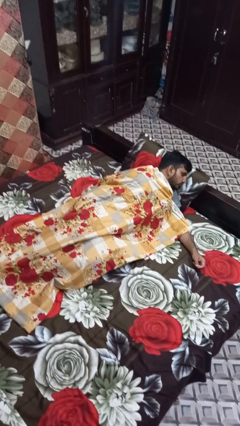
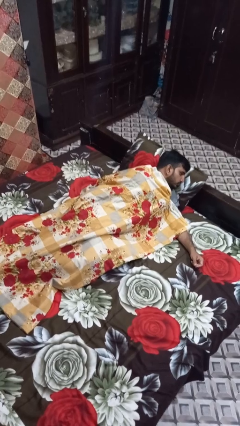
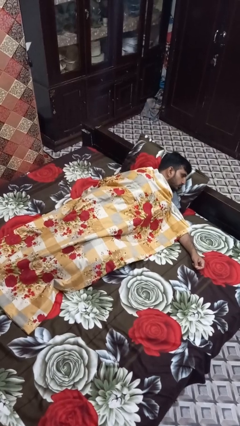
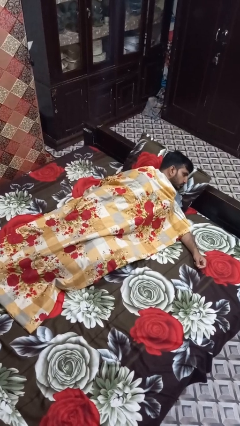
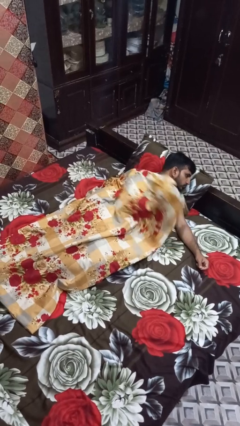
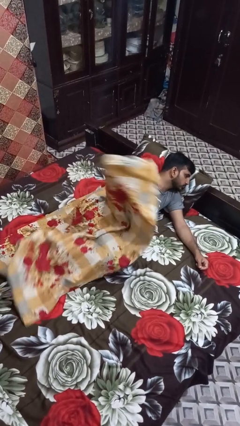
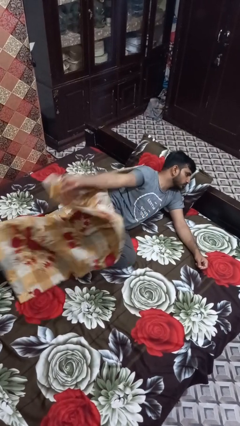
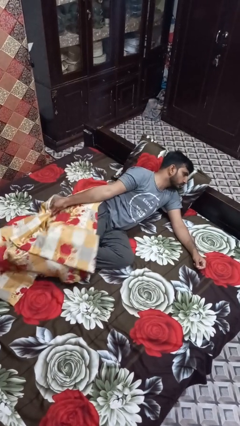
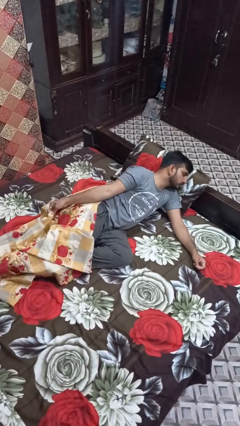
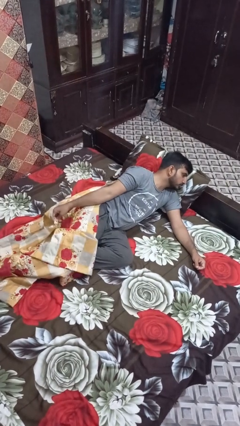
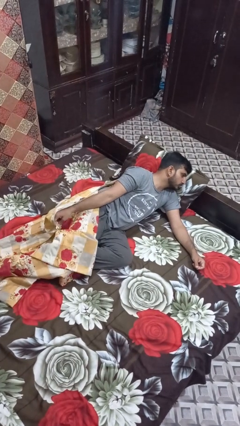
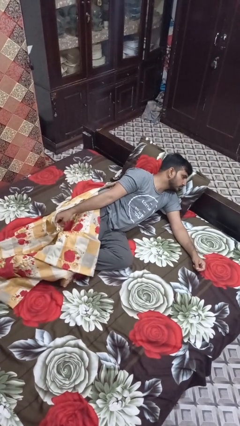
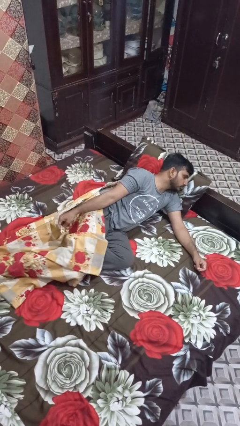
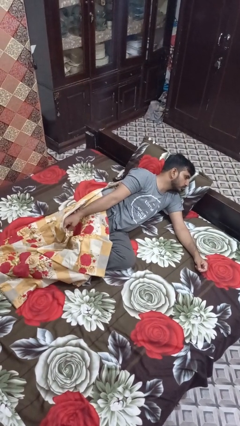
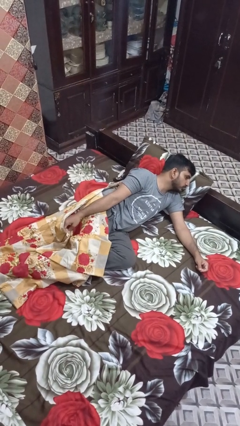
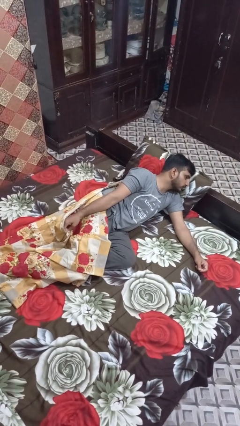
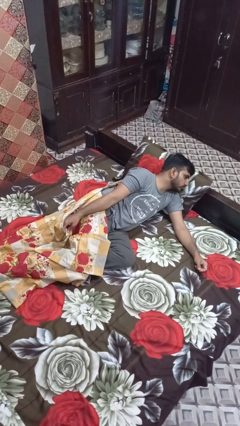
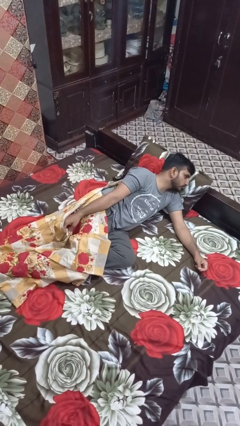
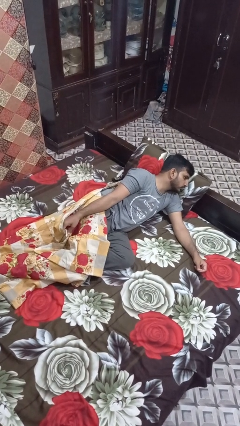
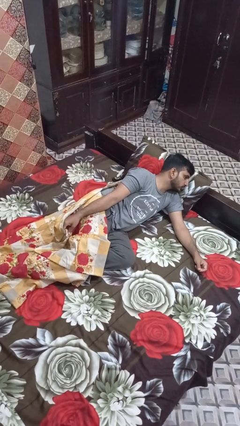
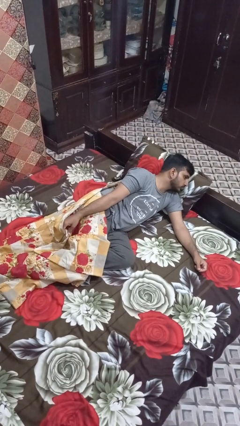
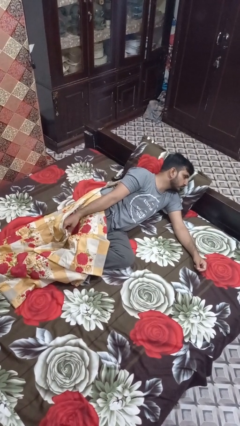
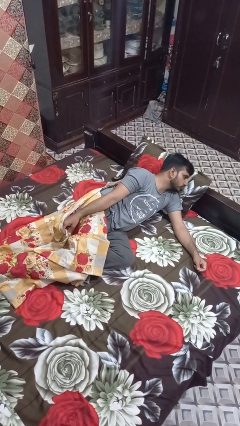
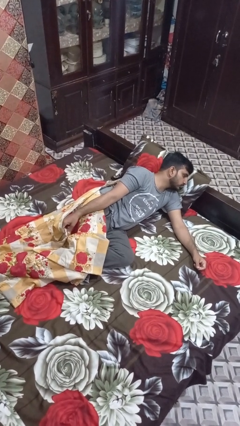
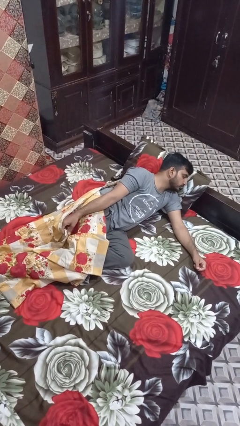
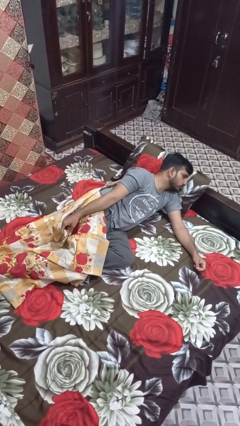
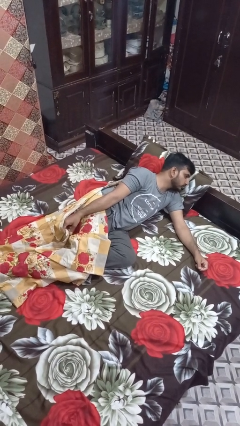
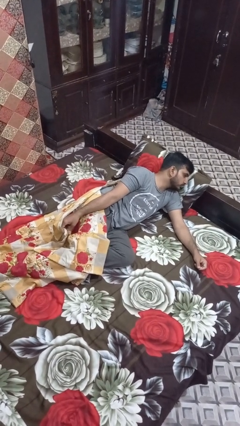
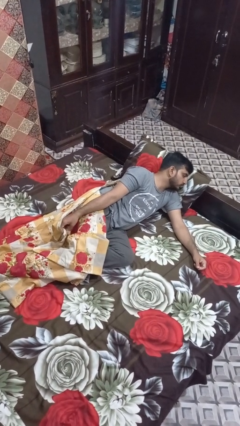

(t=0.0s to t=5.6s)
person uncovers with bedsheets

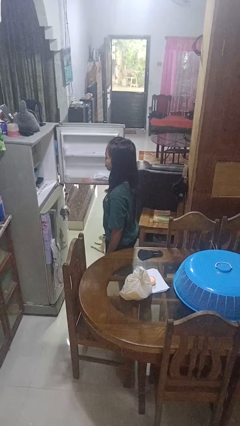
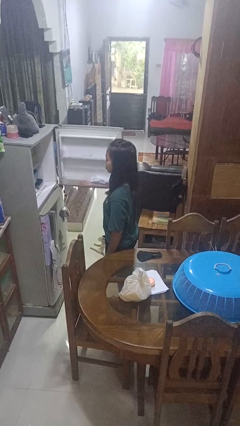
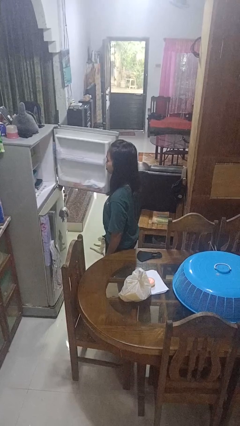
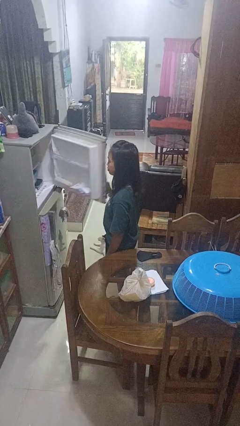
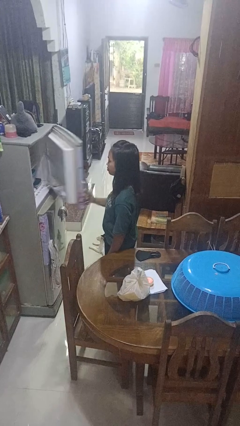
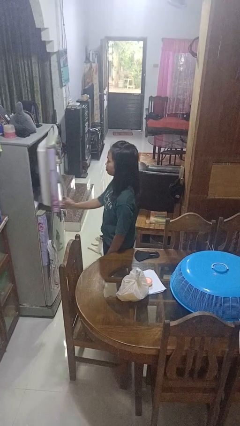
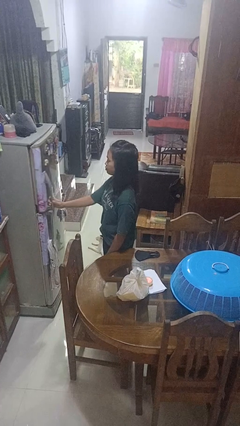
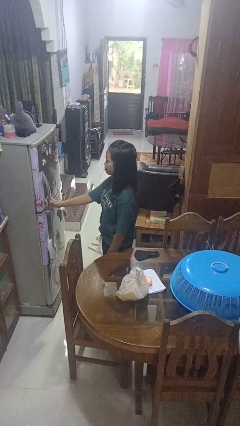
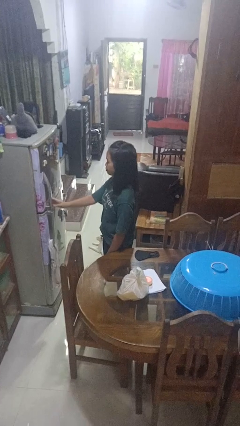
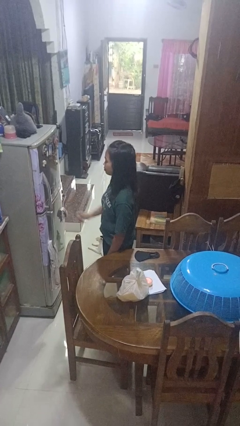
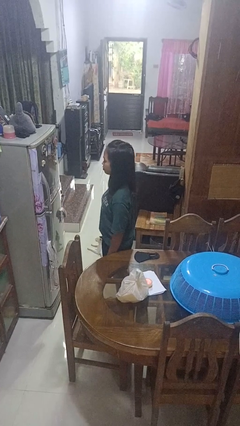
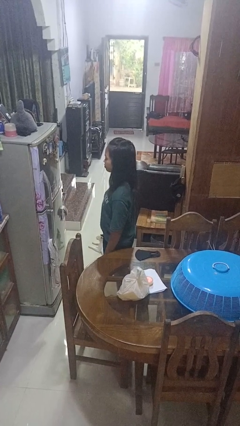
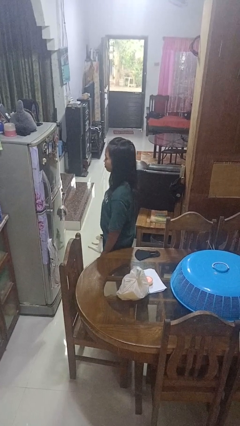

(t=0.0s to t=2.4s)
person closes refrigerator

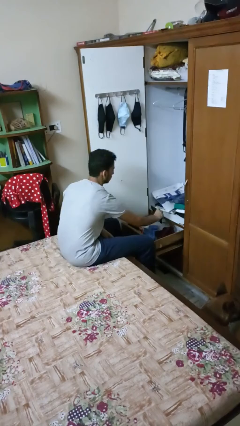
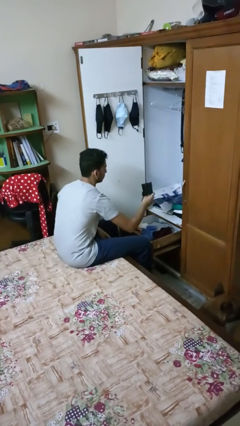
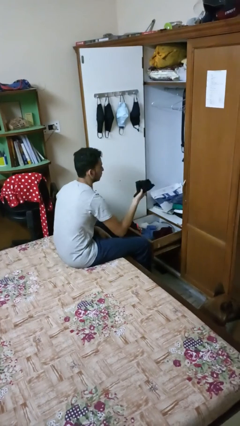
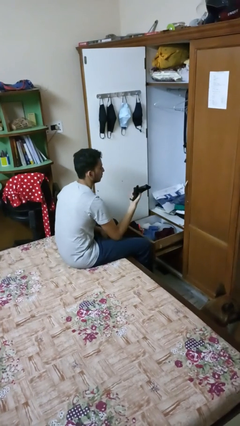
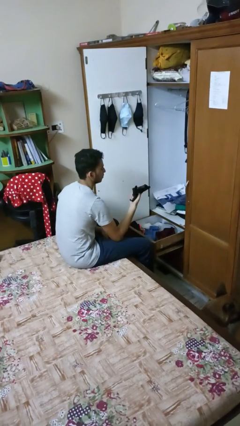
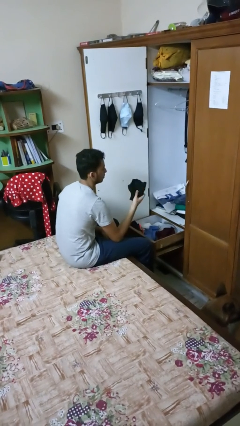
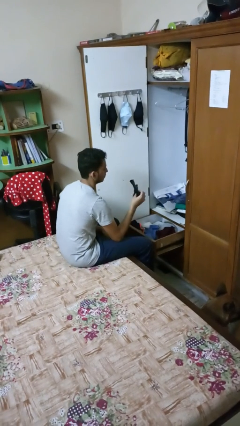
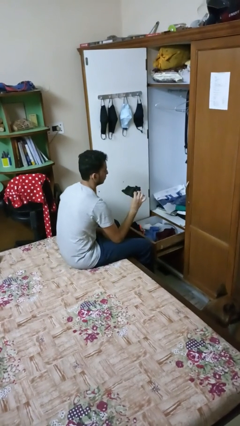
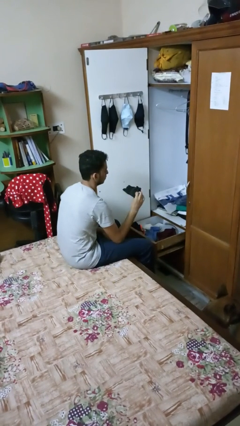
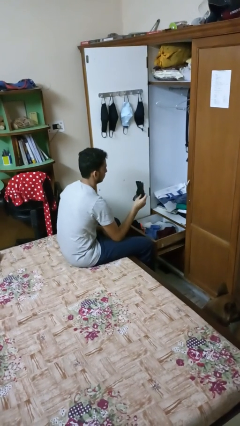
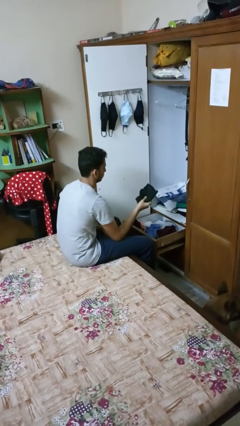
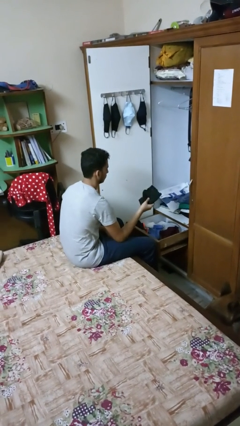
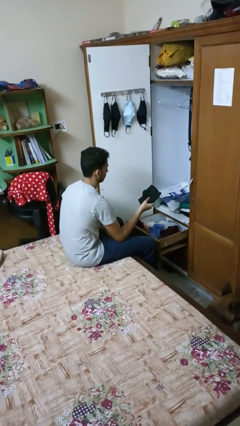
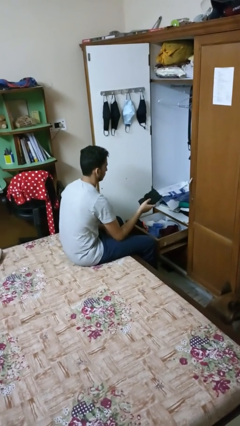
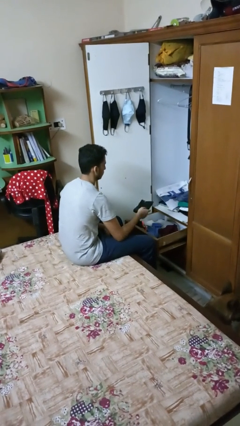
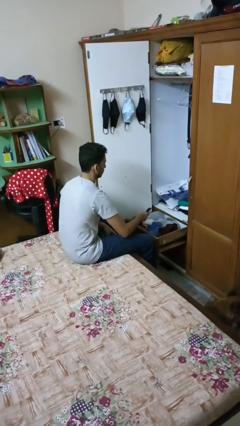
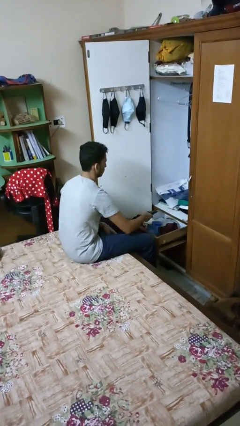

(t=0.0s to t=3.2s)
person takes clothes from dresser

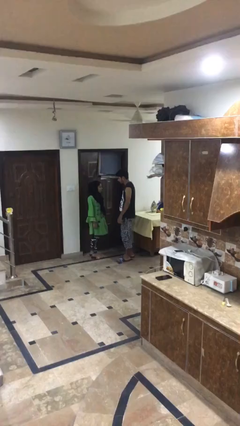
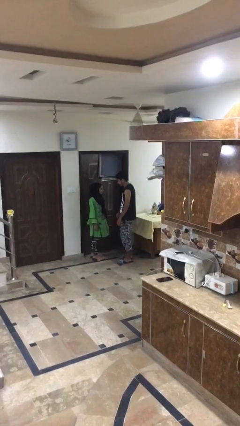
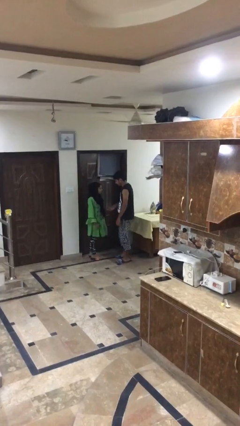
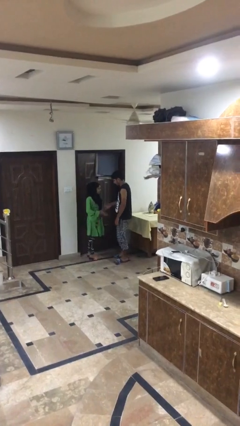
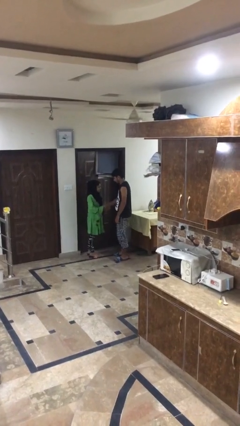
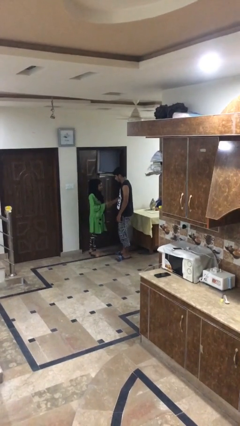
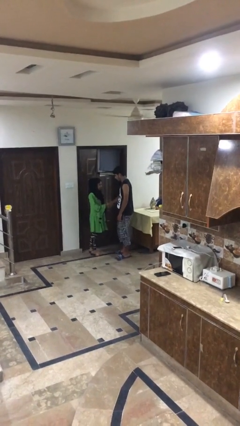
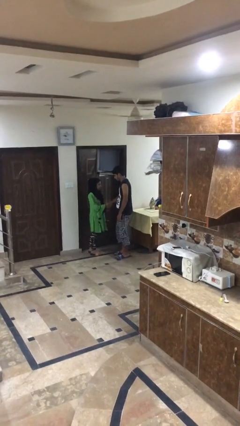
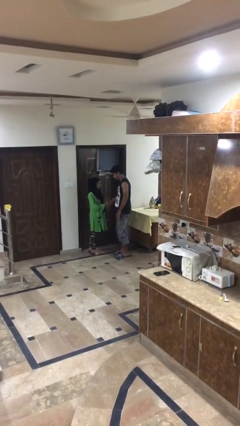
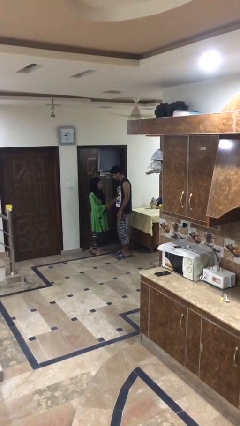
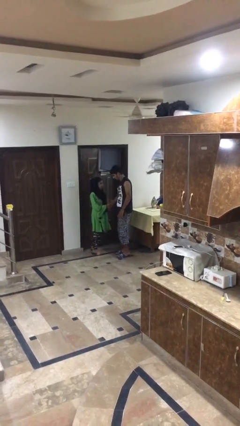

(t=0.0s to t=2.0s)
person shakes hand

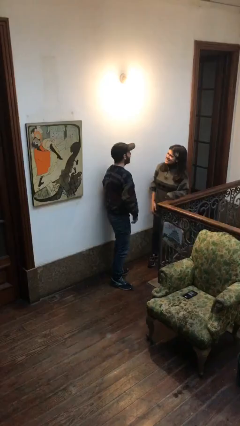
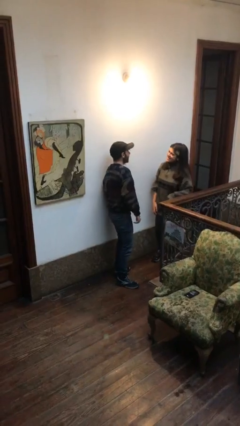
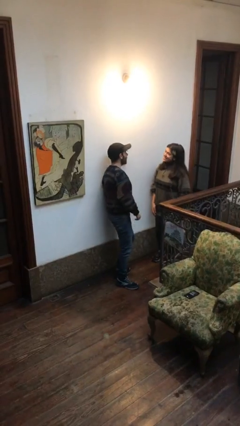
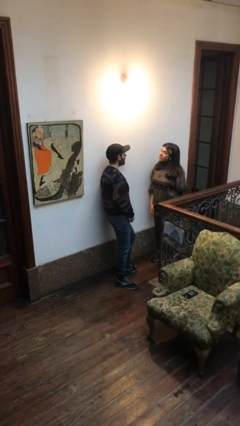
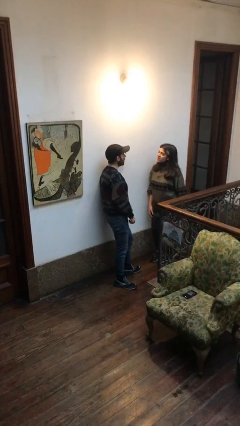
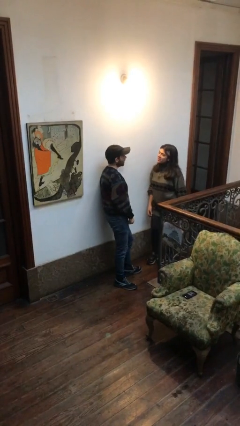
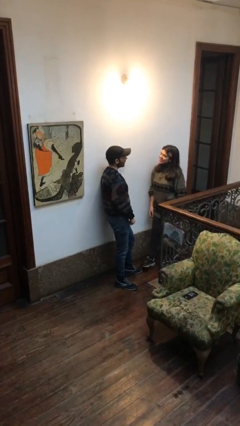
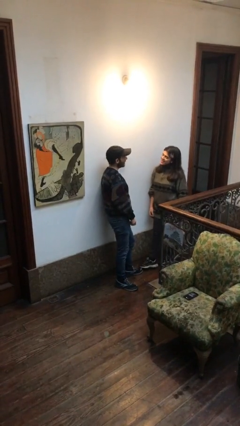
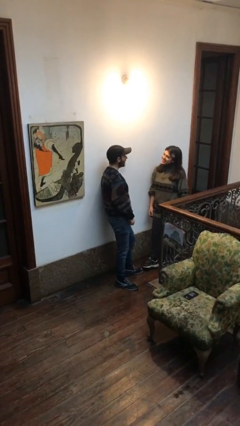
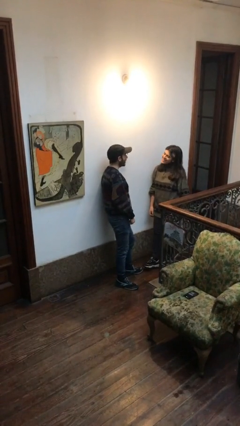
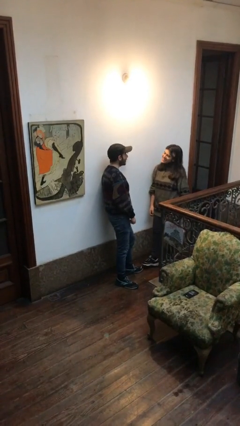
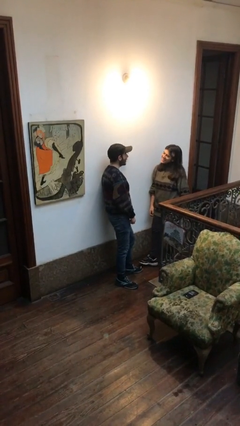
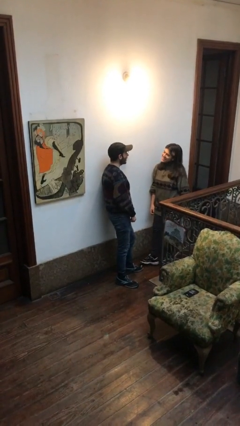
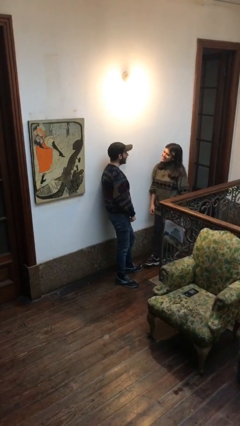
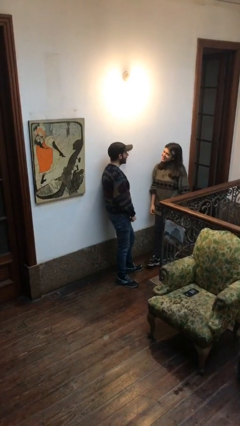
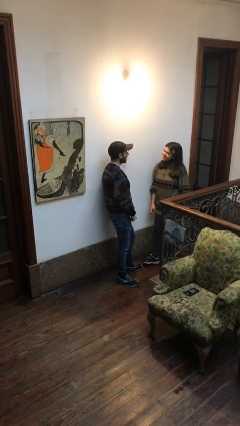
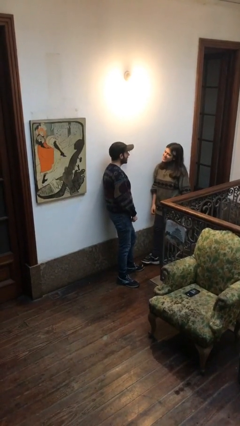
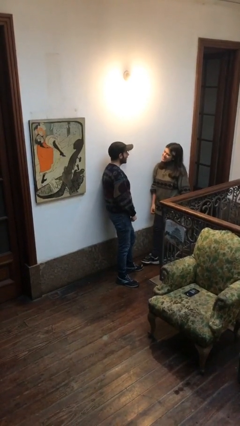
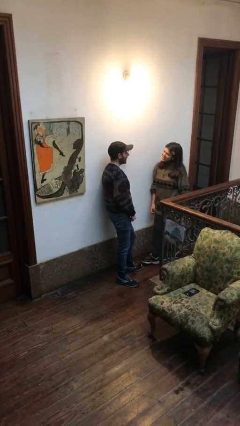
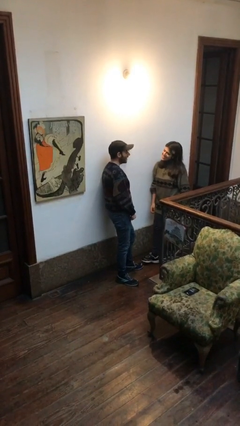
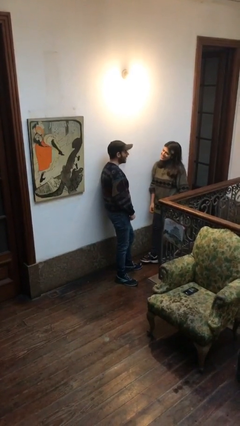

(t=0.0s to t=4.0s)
person talks to person
